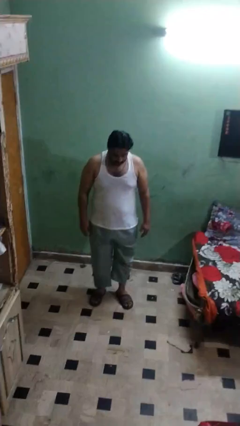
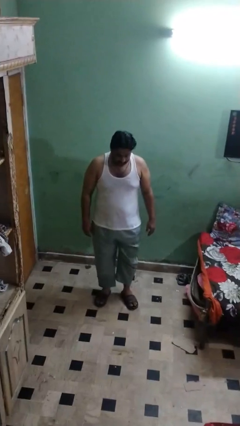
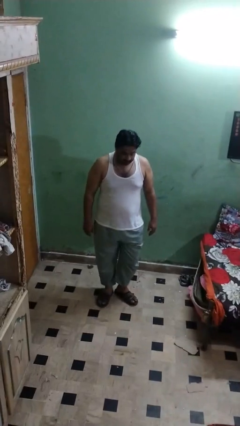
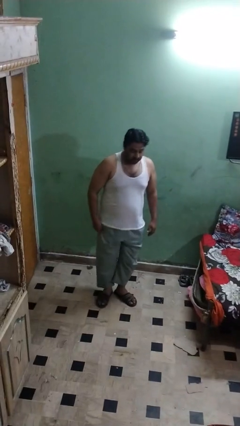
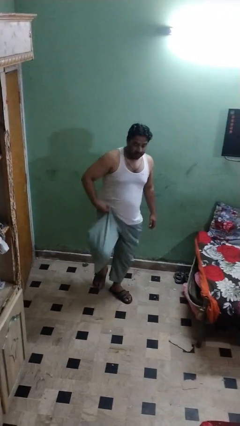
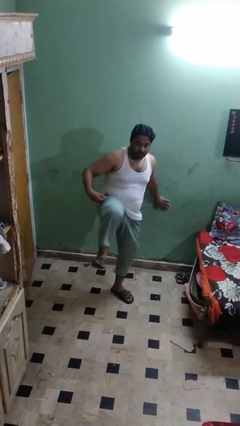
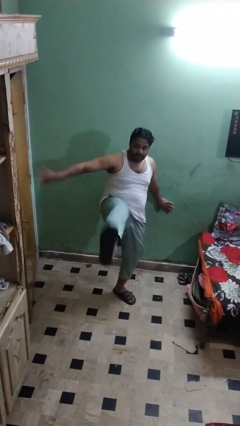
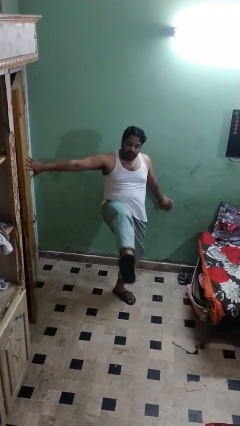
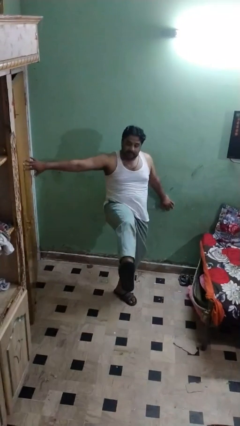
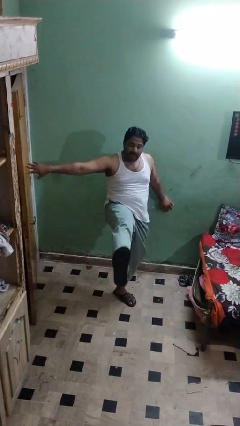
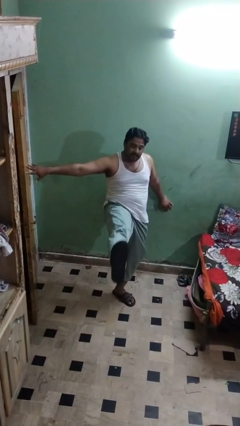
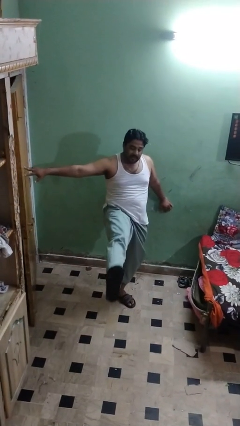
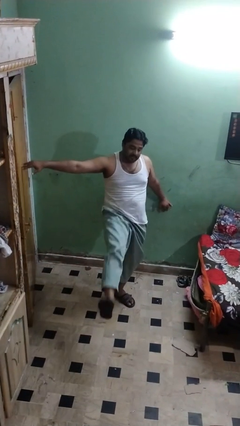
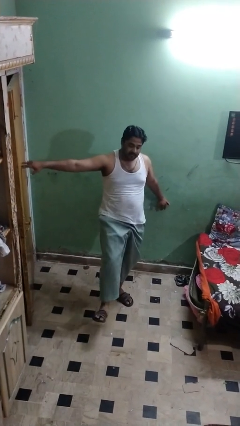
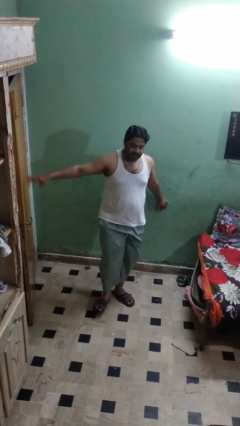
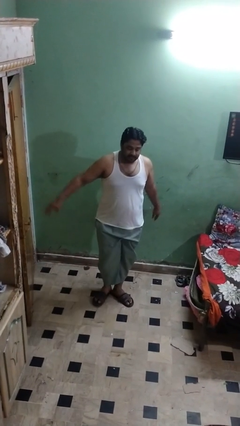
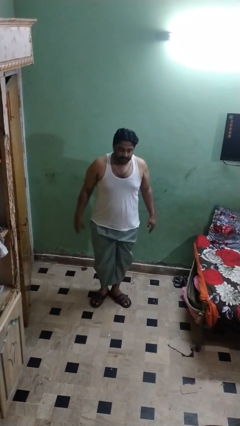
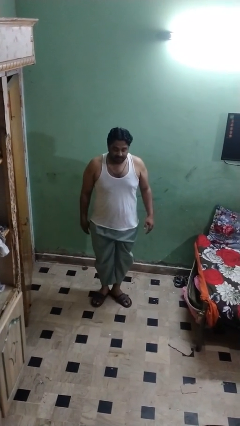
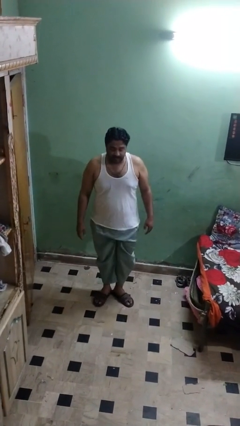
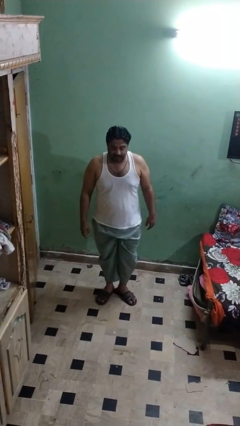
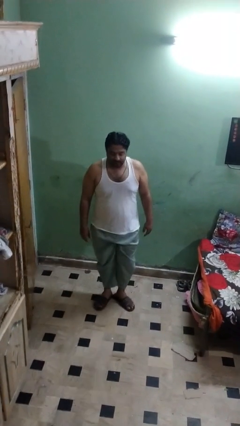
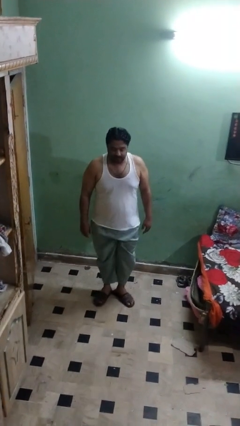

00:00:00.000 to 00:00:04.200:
person karate kicks

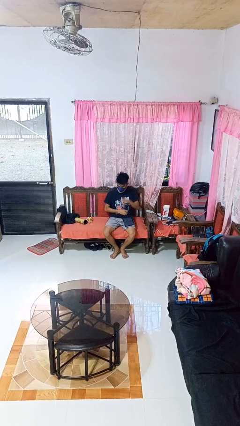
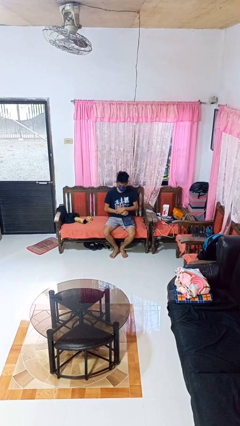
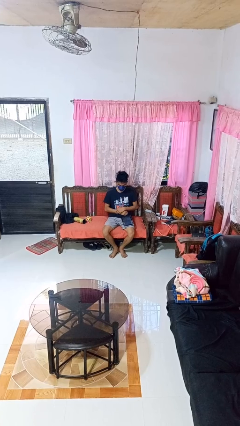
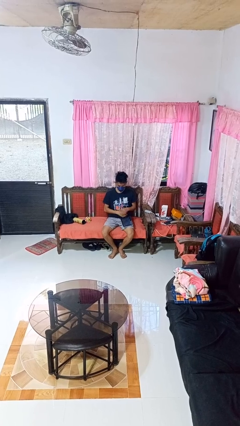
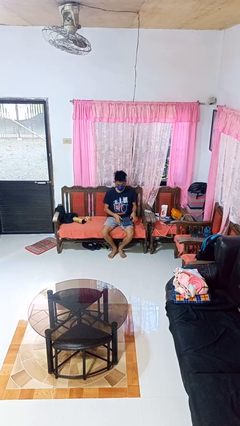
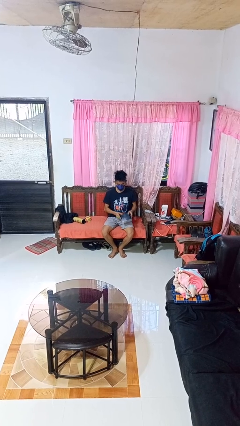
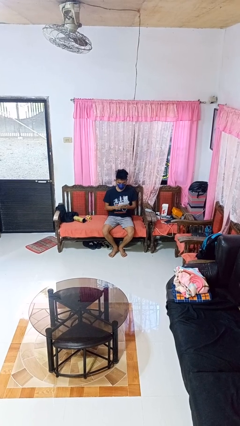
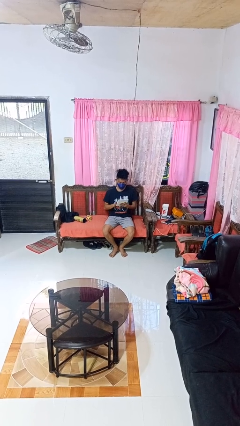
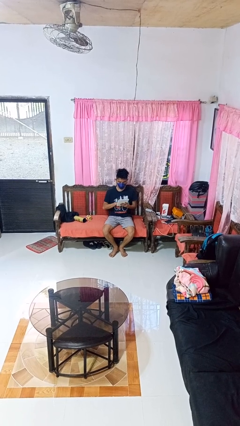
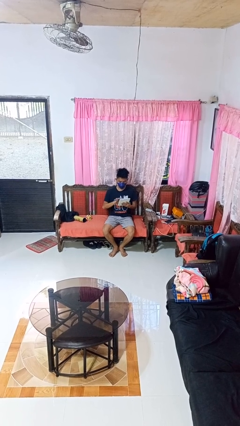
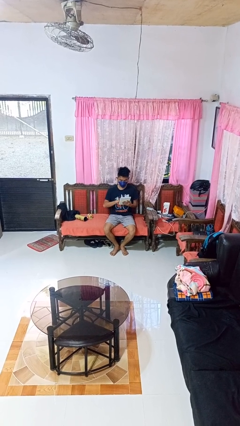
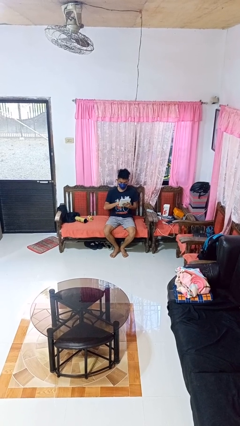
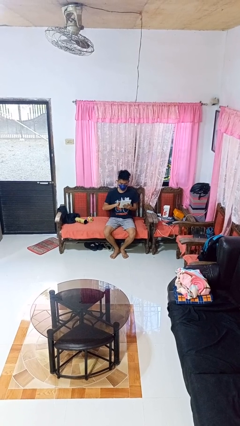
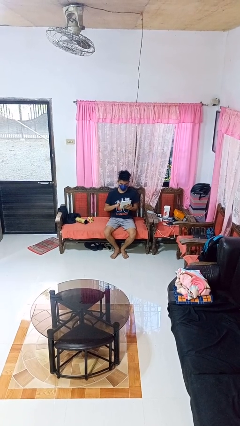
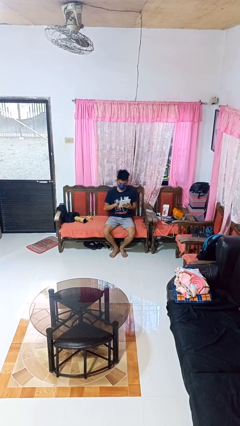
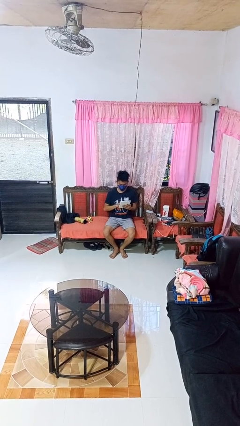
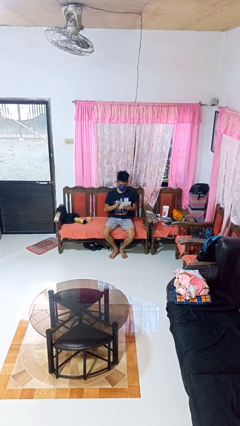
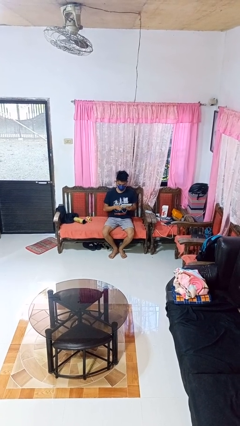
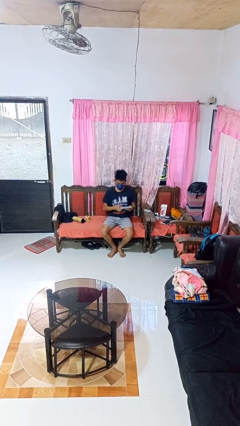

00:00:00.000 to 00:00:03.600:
person interacts with tablet

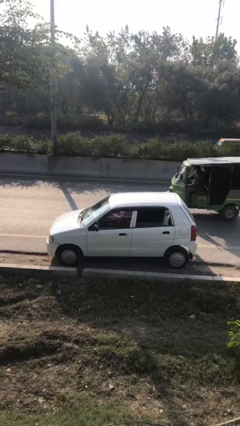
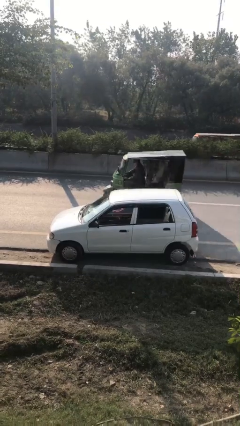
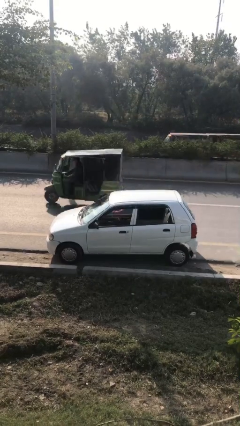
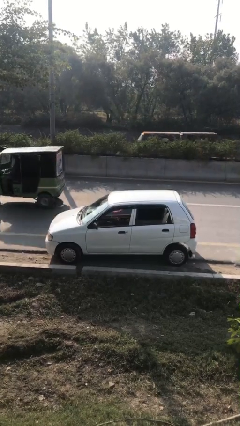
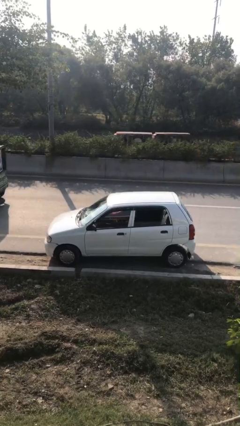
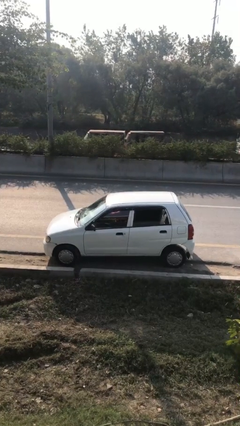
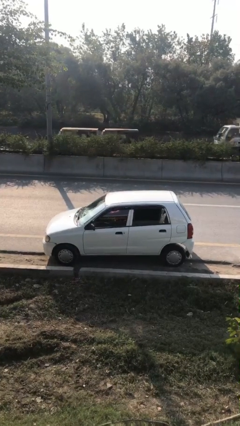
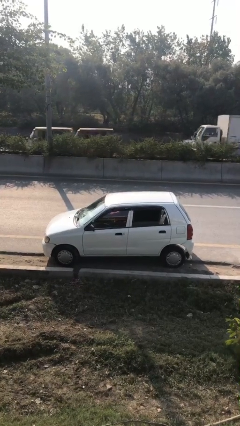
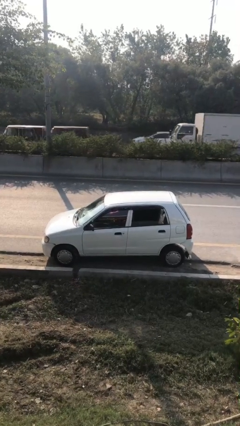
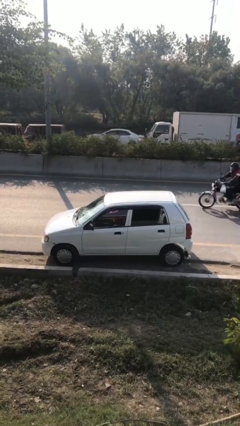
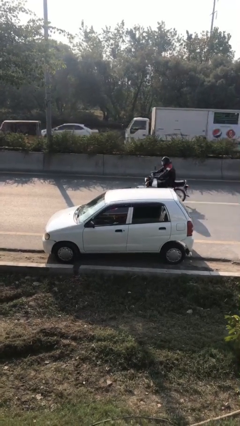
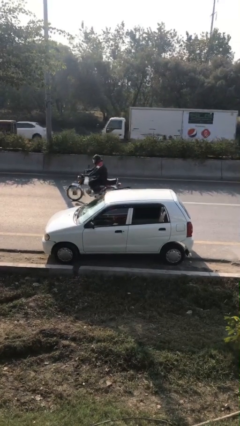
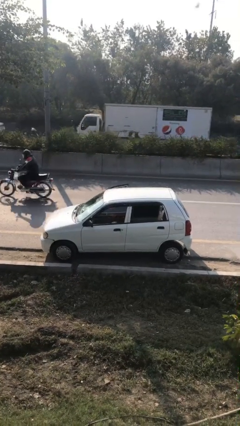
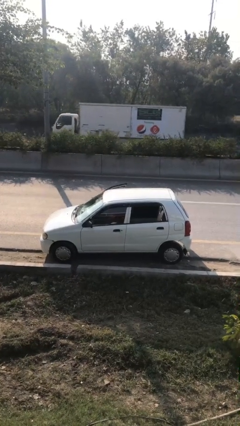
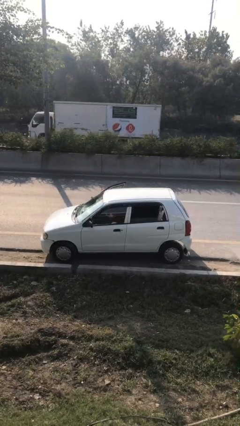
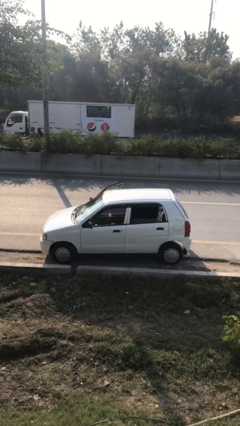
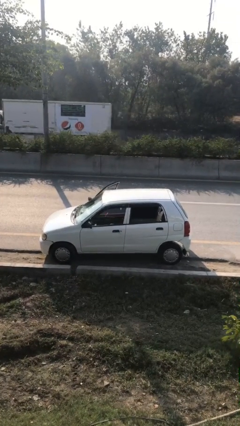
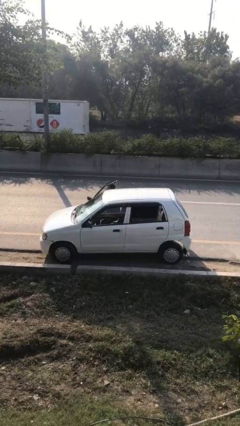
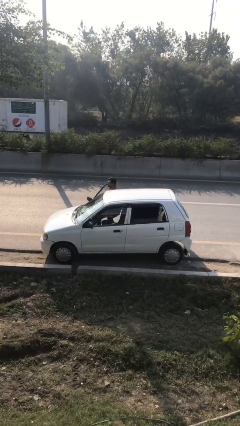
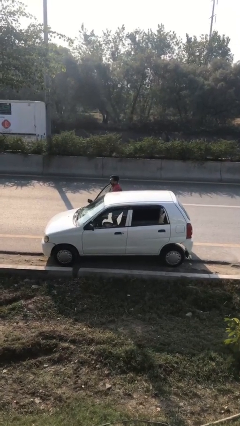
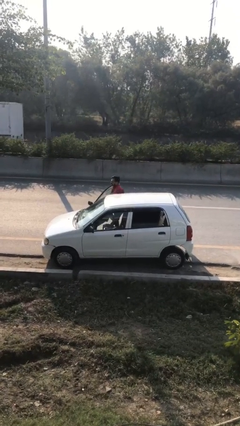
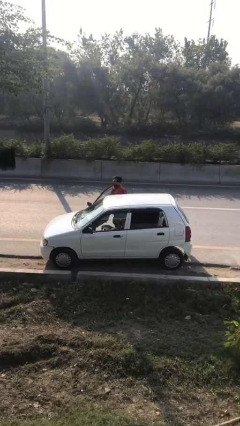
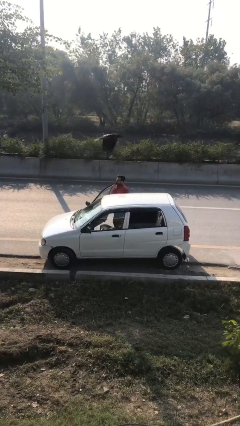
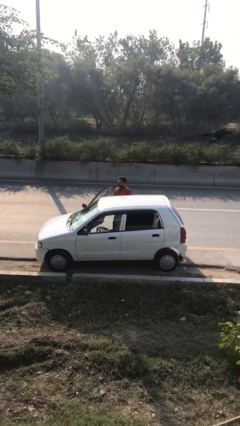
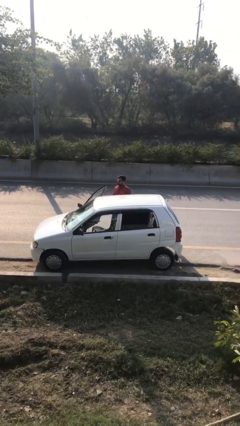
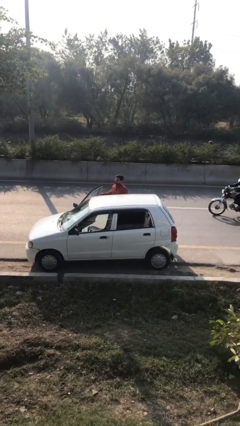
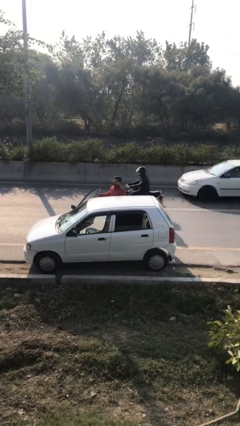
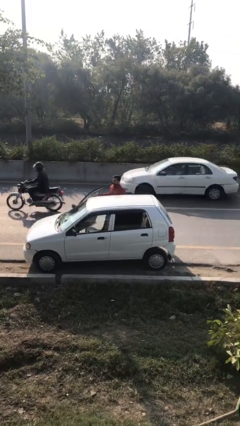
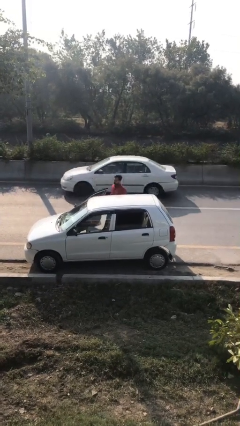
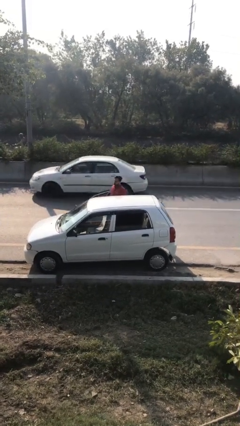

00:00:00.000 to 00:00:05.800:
person exits car

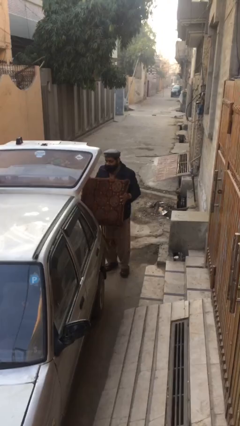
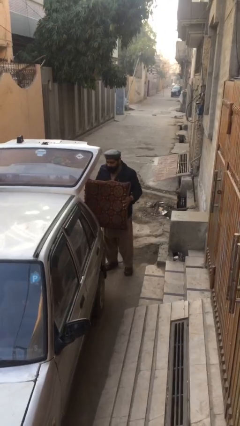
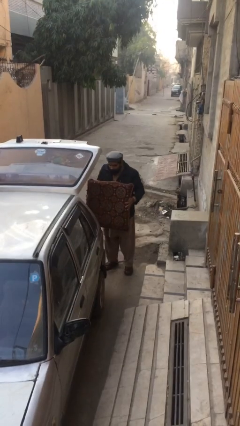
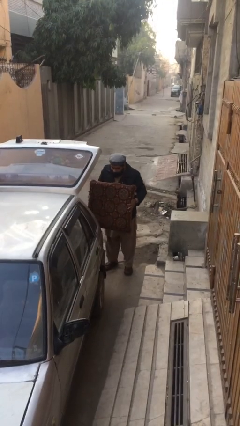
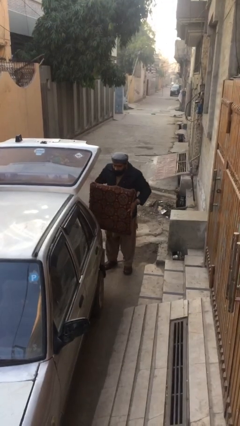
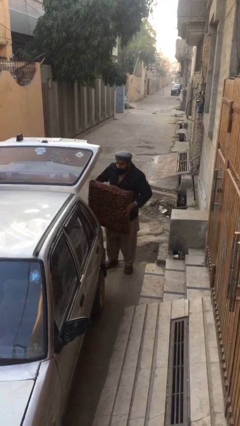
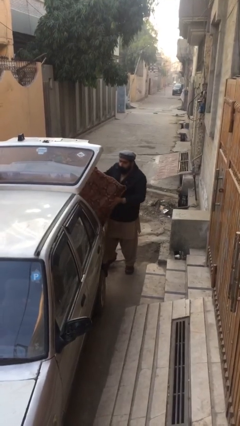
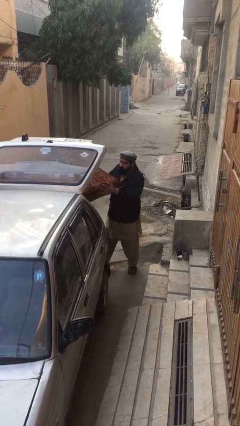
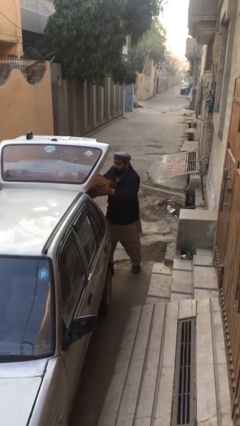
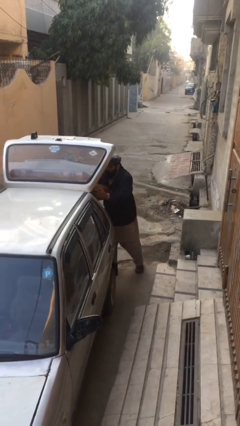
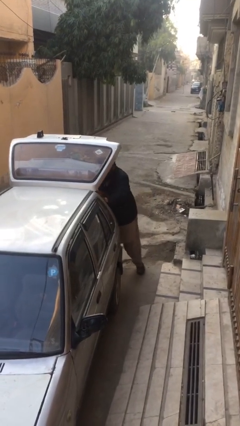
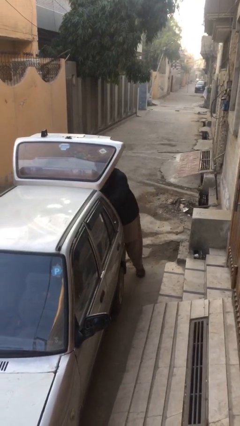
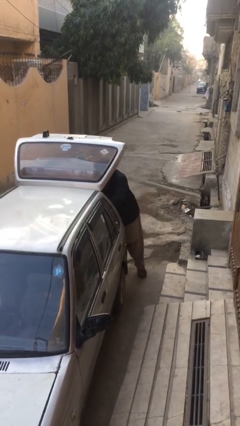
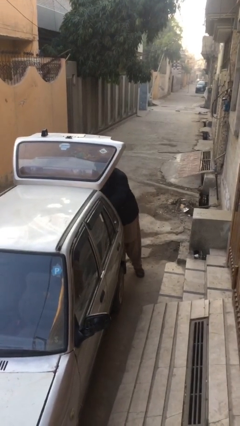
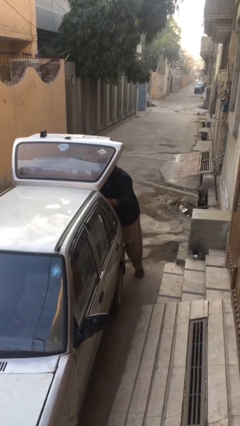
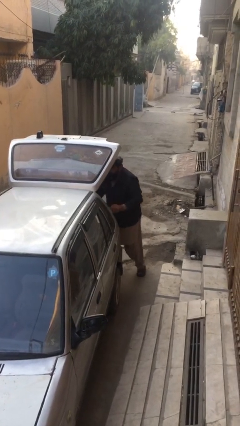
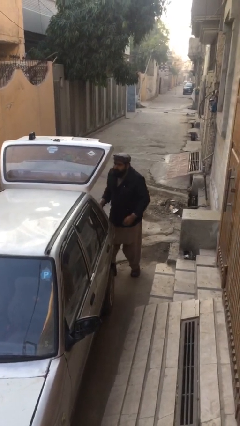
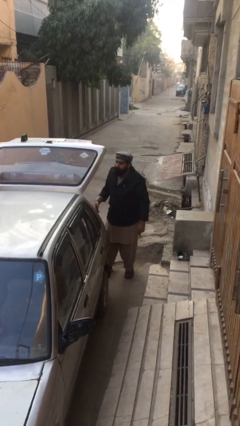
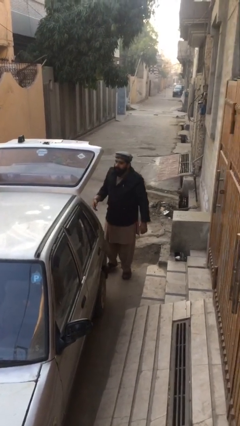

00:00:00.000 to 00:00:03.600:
person loads car

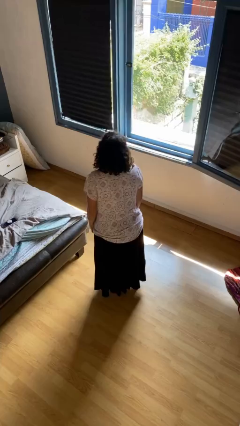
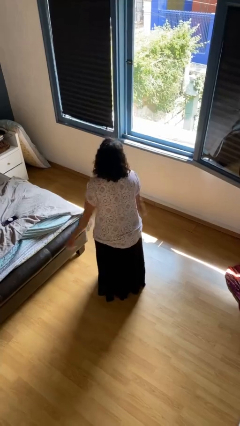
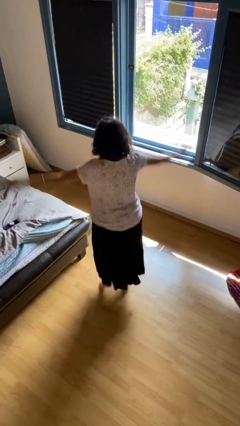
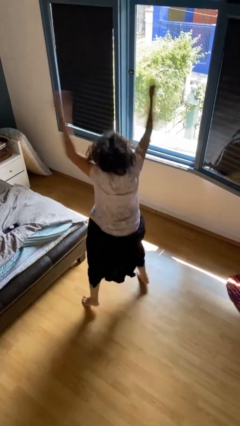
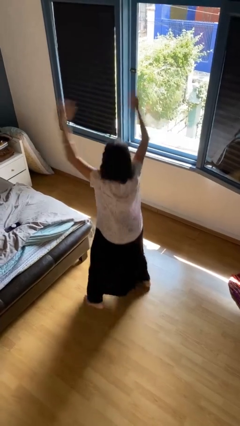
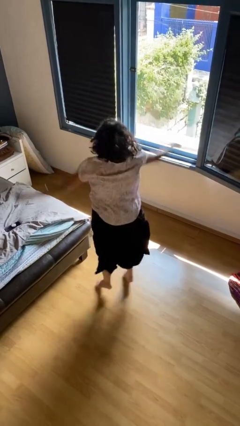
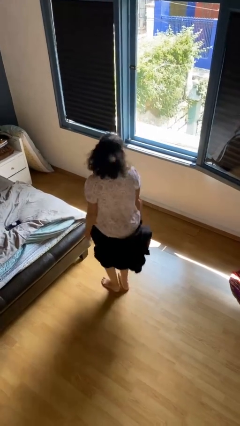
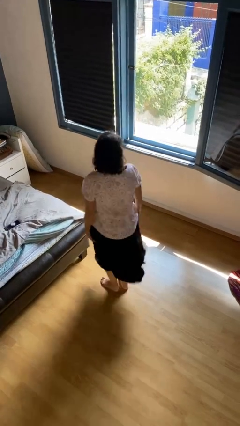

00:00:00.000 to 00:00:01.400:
person exercises with jumping jacks
